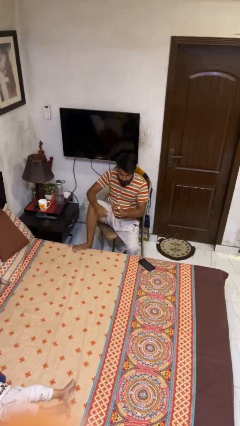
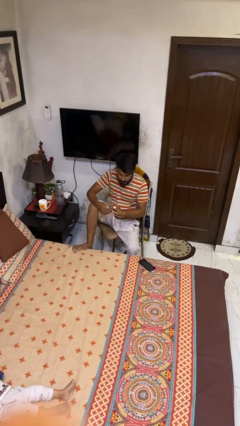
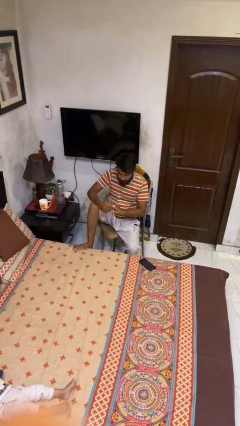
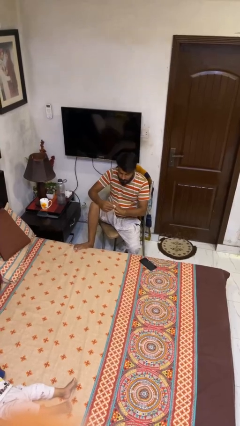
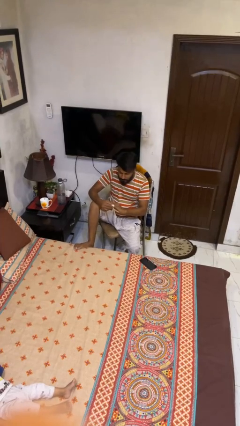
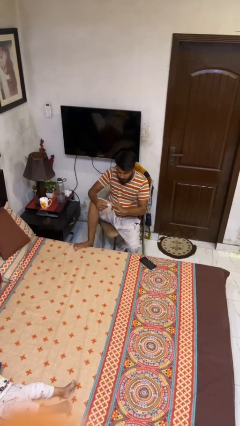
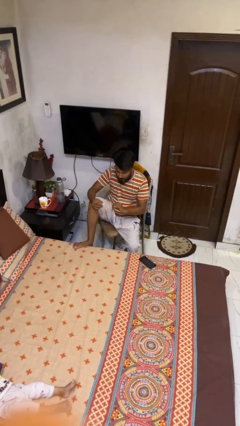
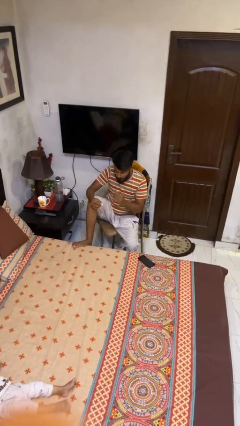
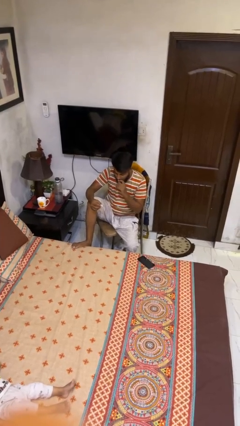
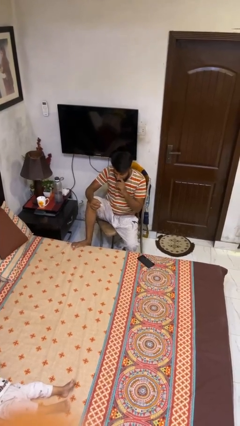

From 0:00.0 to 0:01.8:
person takes off ring

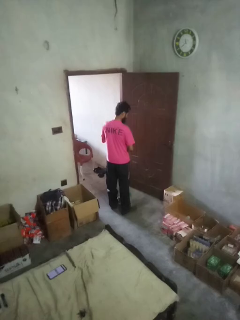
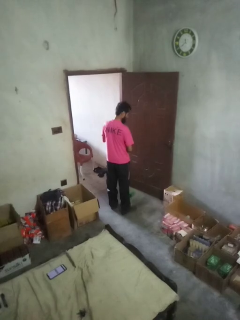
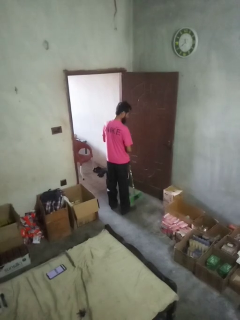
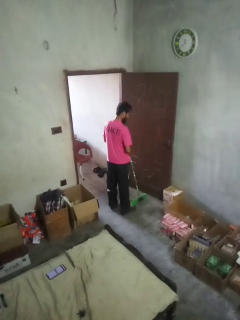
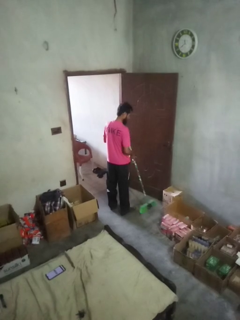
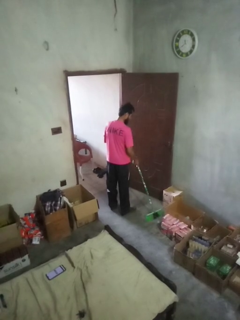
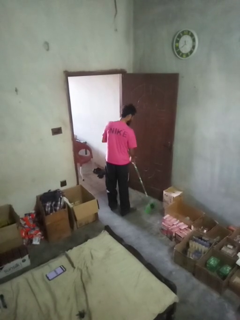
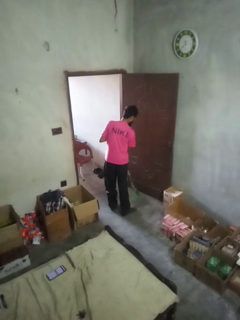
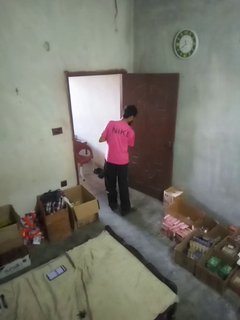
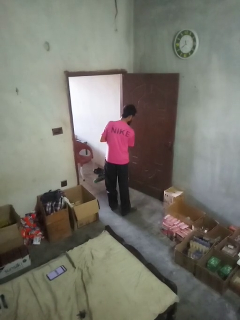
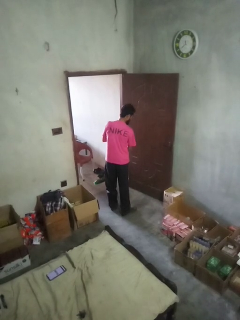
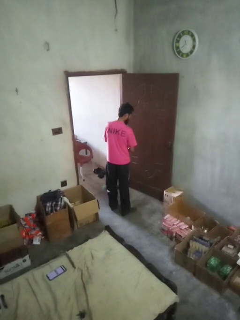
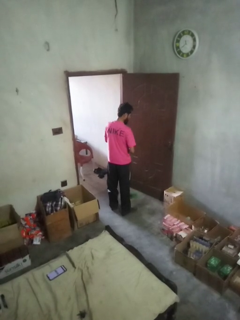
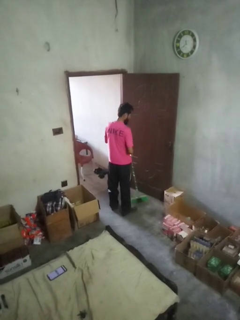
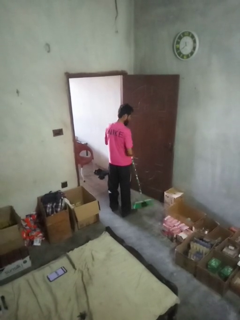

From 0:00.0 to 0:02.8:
person sweeps floor

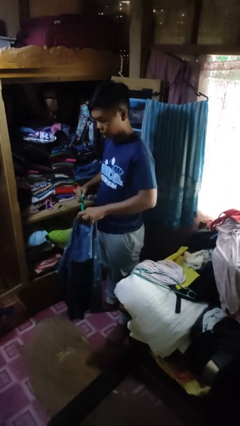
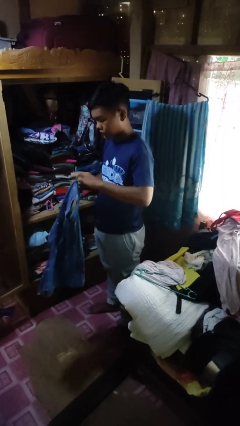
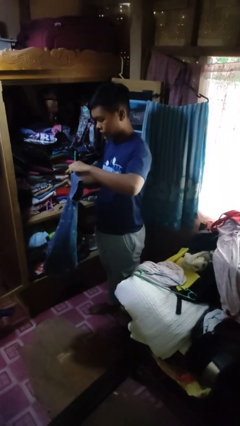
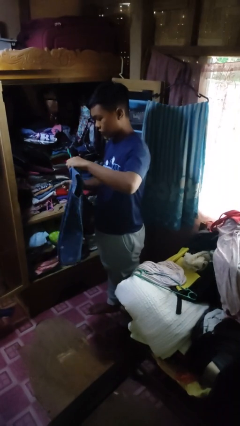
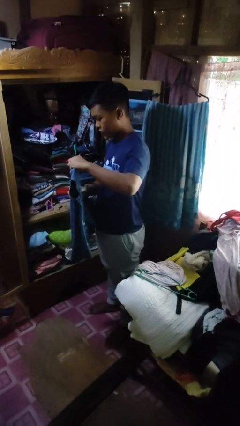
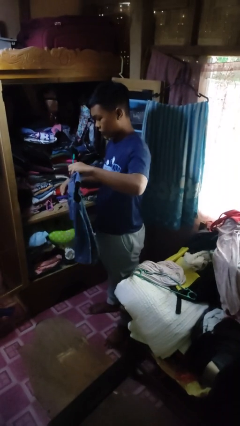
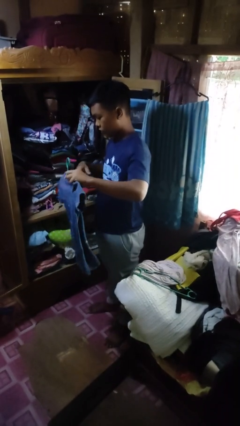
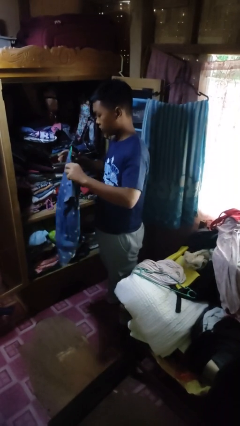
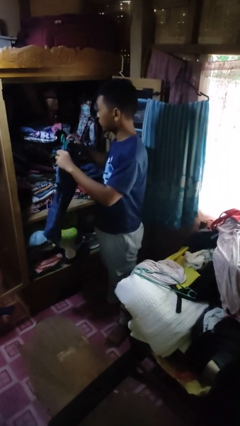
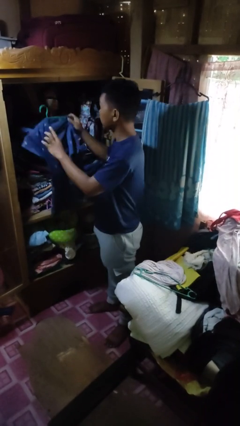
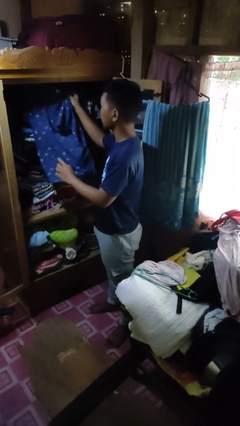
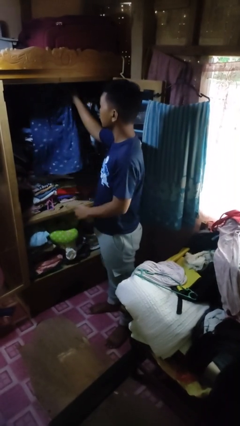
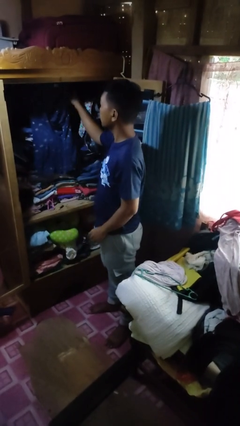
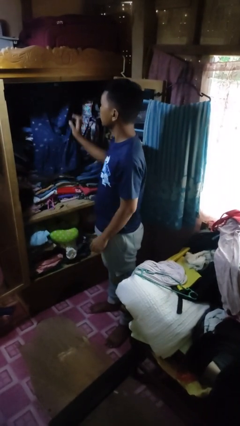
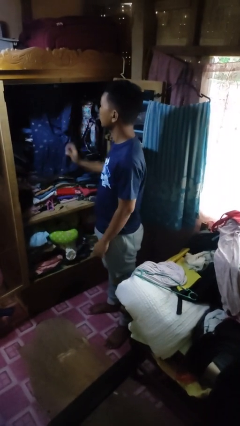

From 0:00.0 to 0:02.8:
person puts clothes into closet

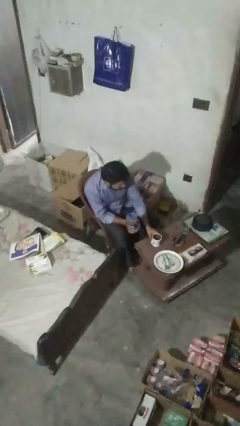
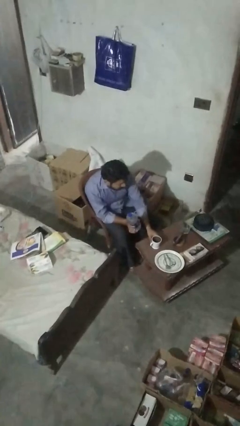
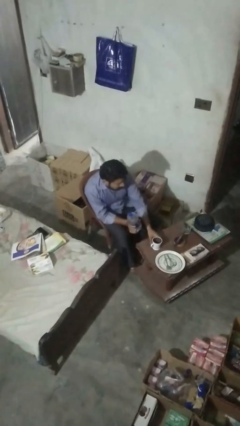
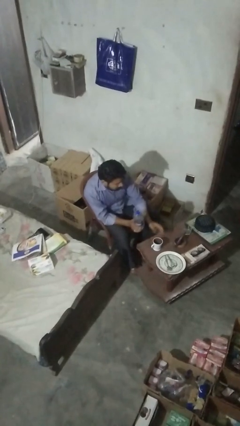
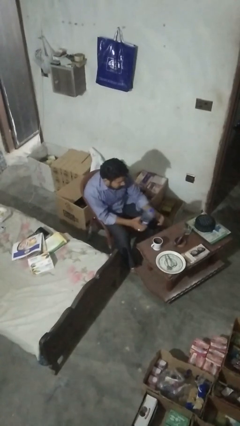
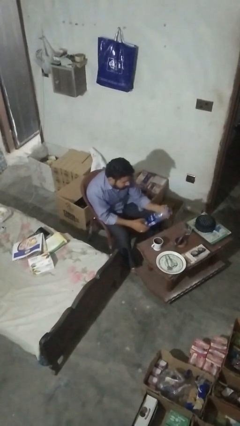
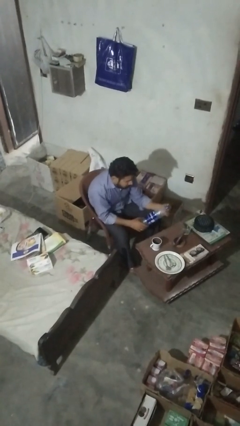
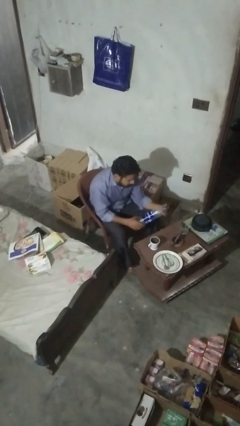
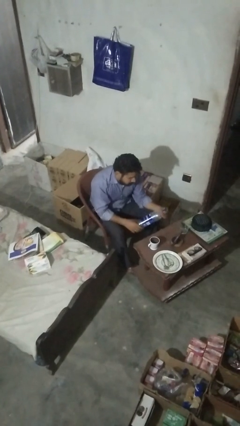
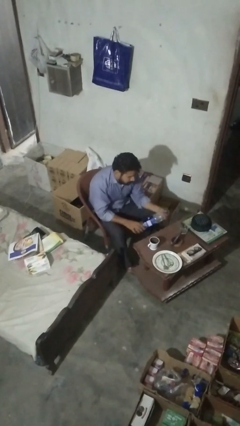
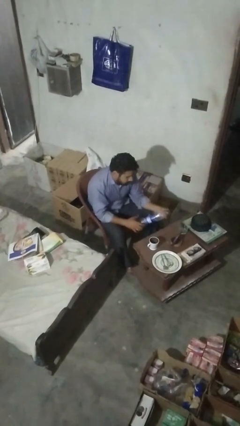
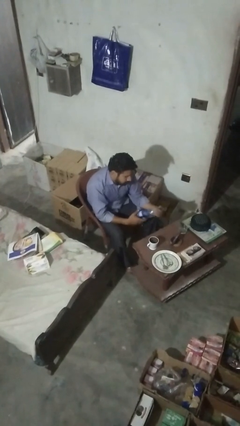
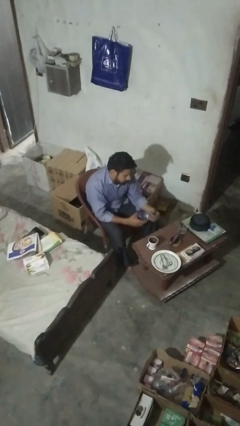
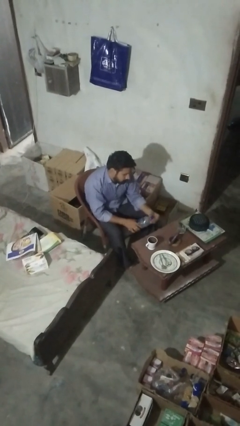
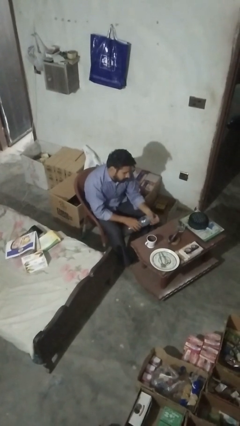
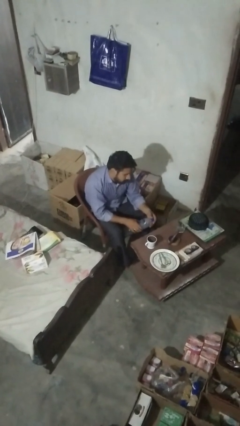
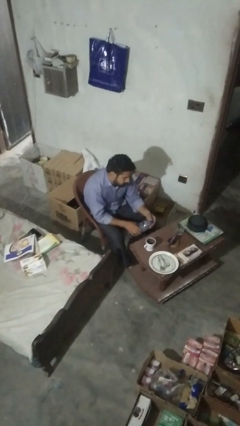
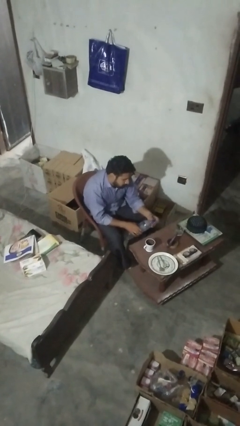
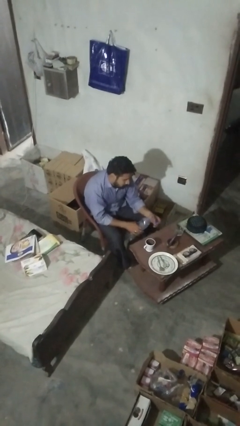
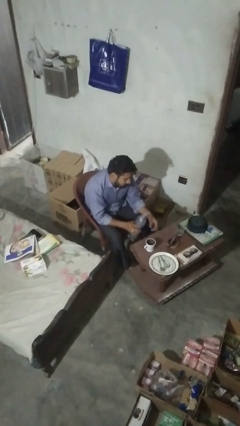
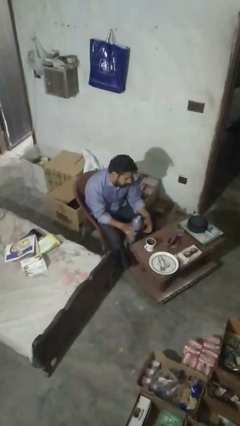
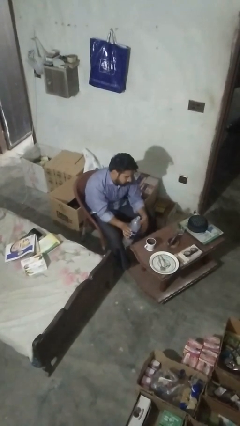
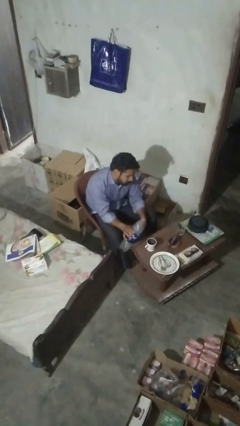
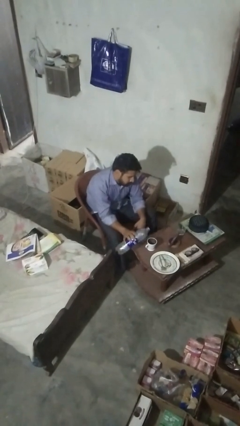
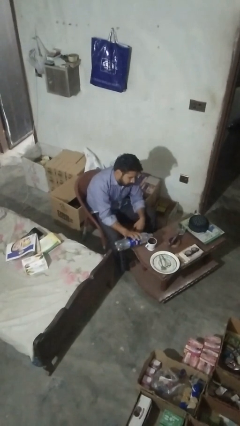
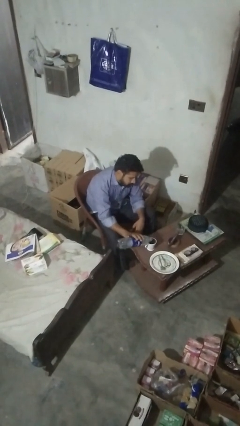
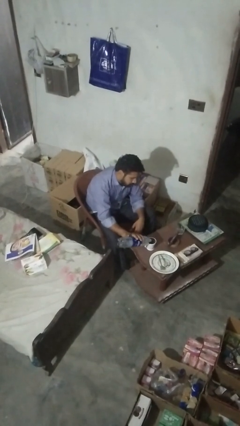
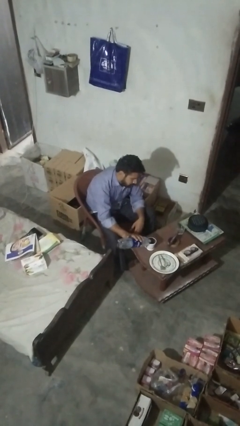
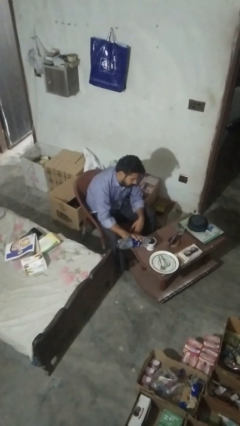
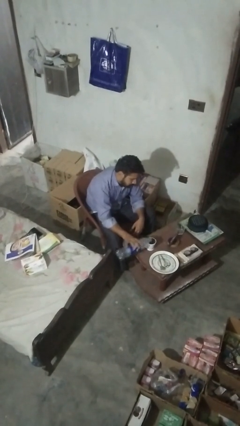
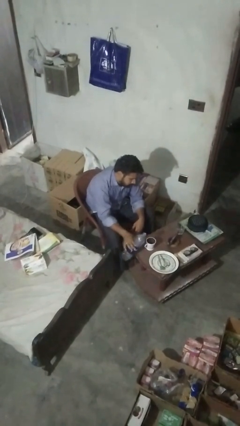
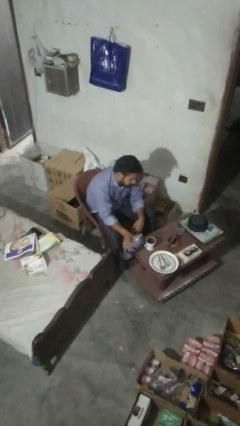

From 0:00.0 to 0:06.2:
person pours liquid into cup

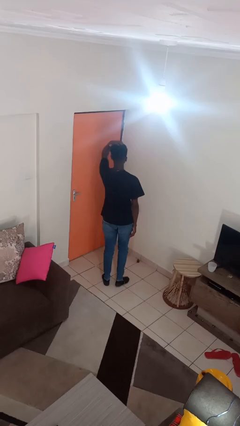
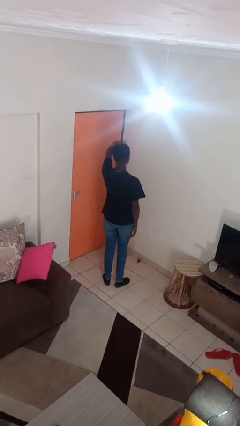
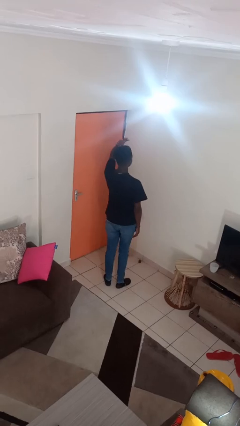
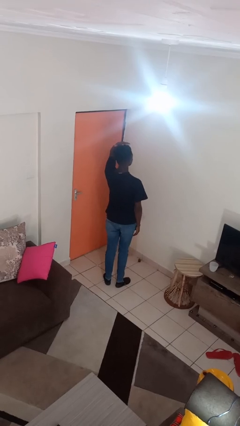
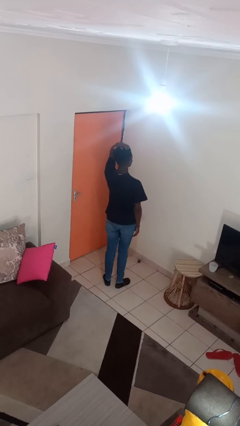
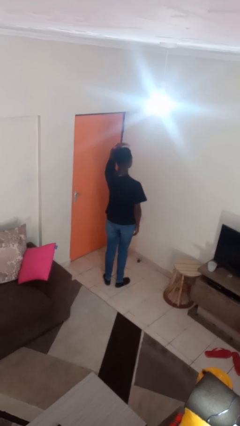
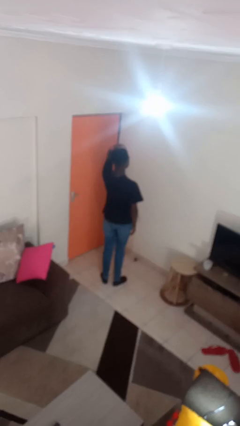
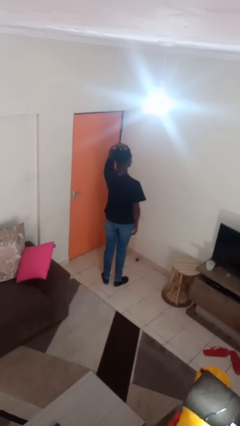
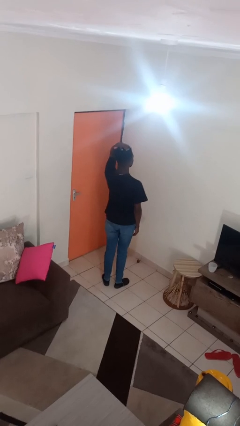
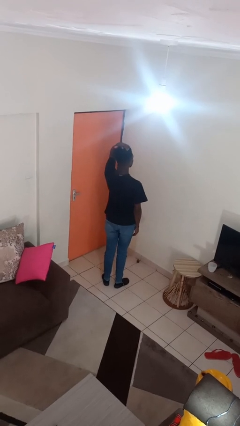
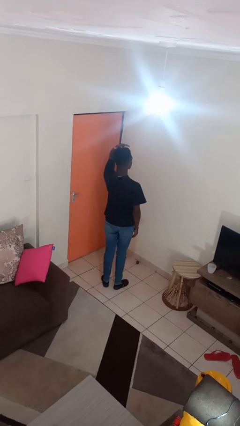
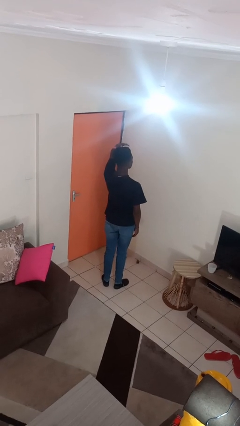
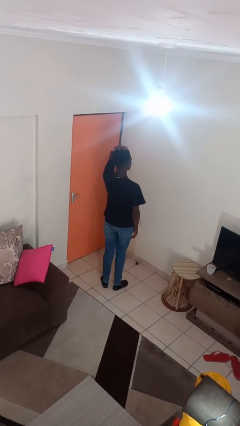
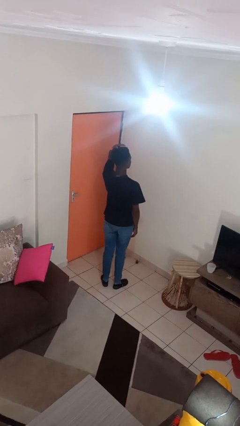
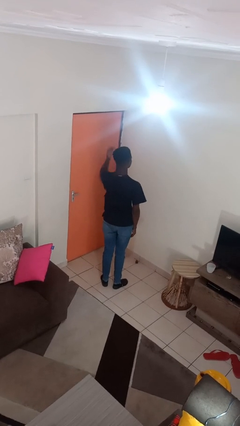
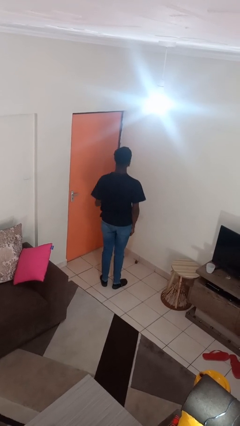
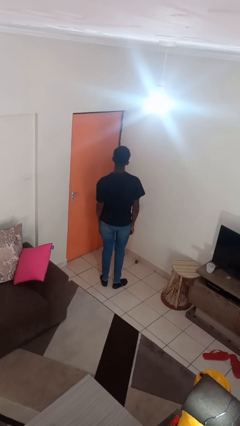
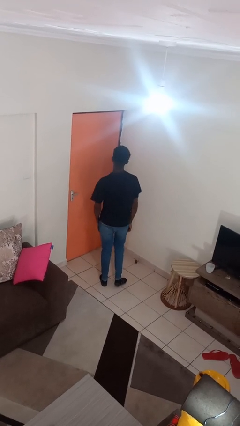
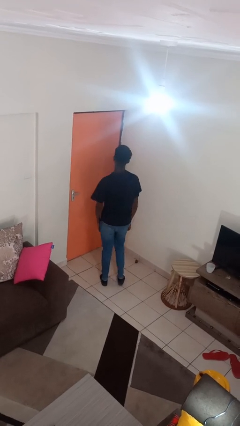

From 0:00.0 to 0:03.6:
person pats head

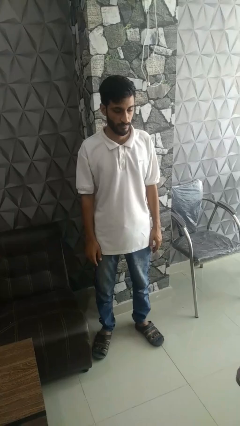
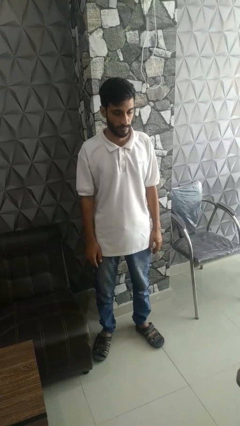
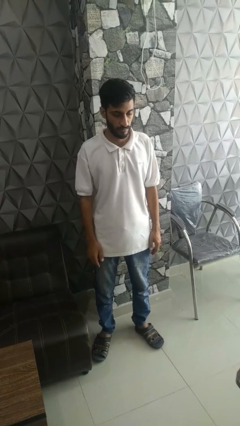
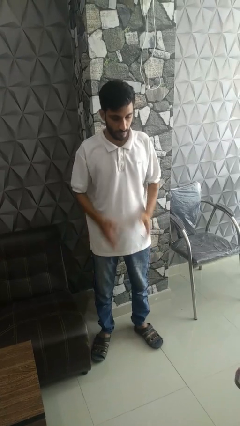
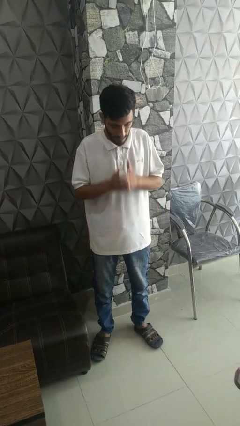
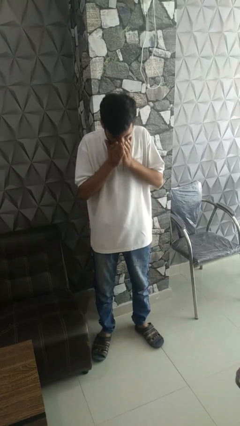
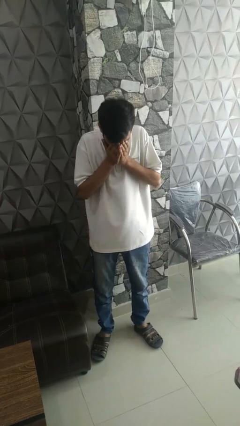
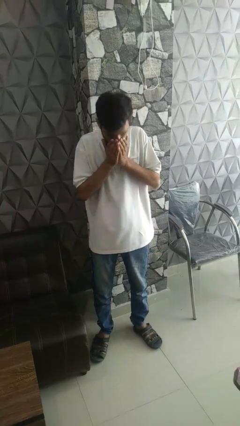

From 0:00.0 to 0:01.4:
person sneezes into hand
